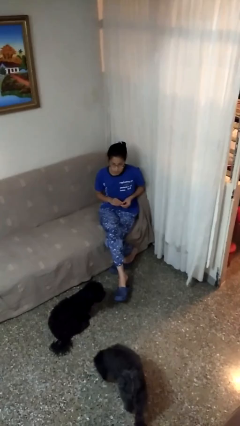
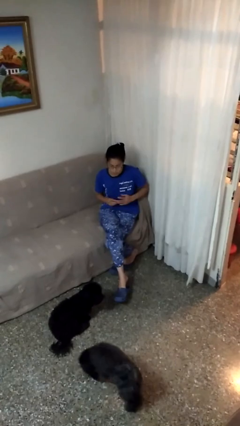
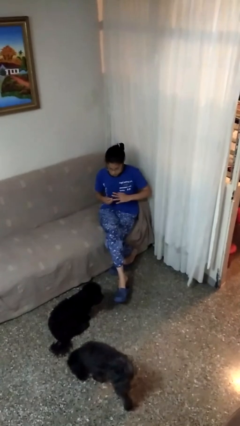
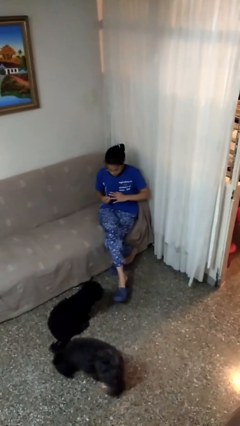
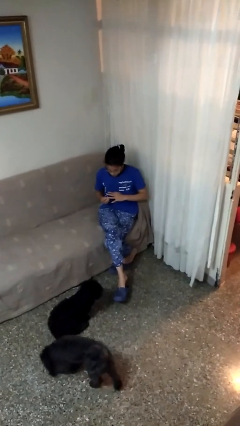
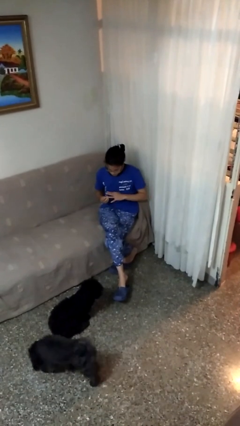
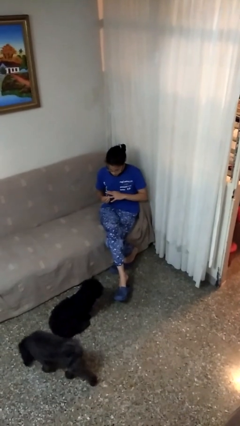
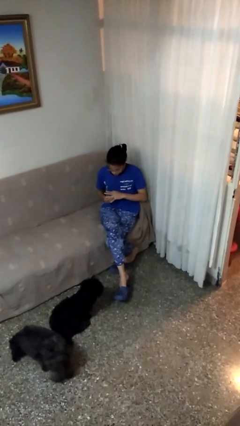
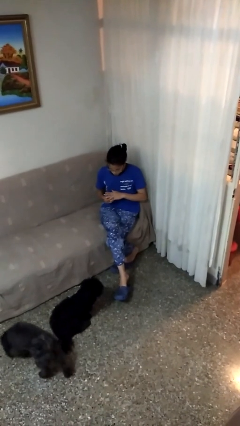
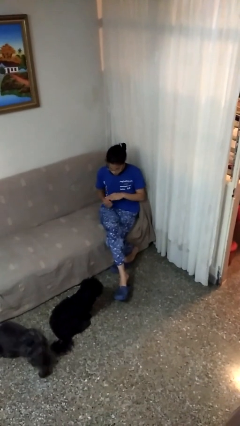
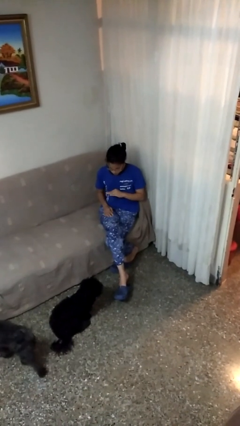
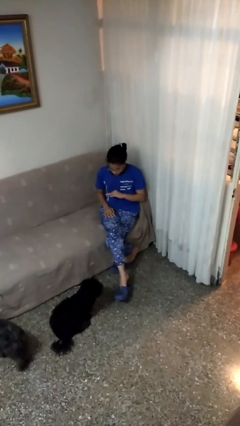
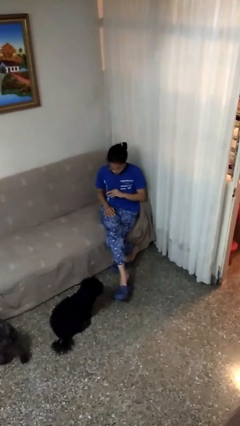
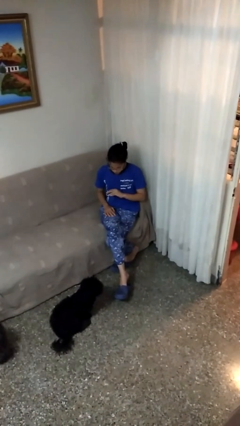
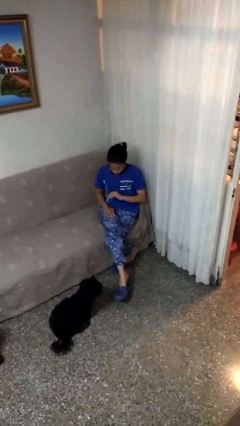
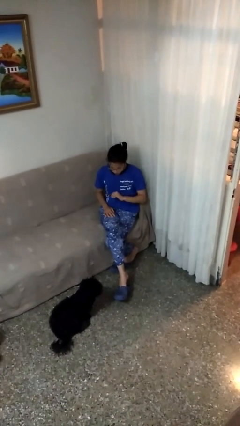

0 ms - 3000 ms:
person puts on ring

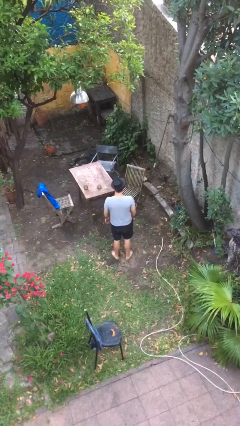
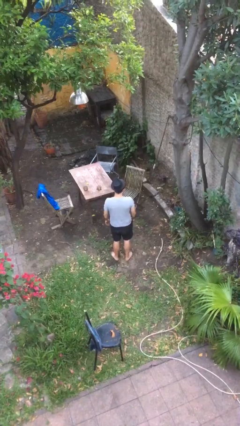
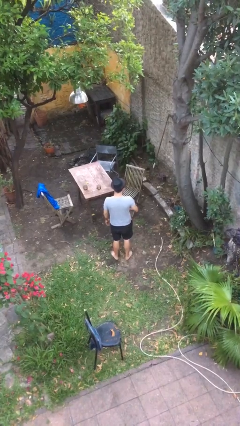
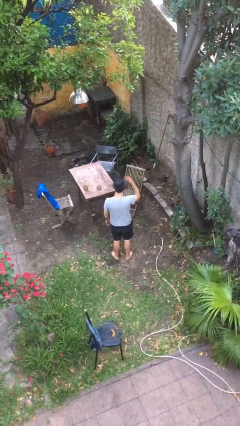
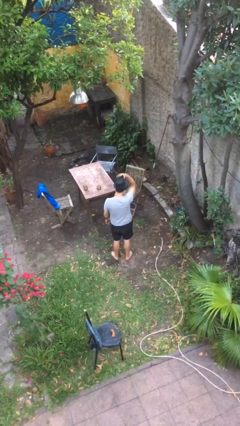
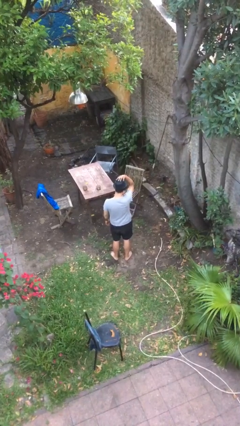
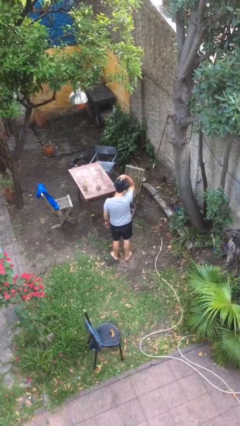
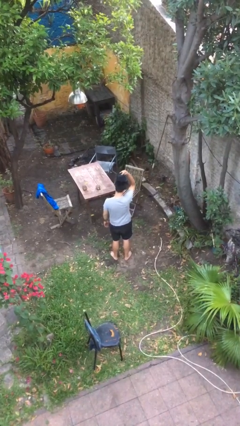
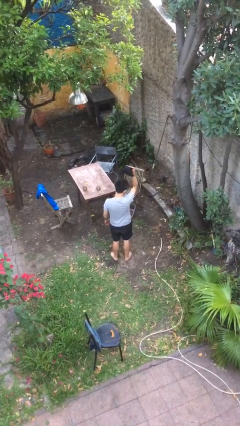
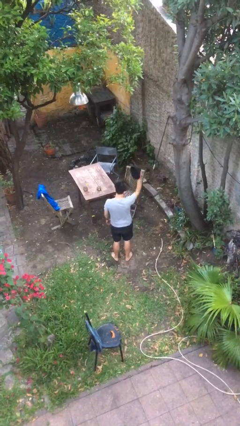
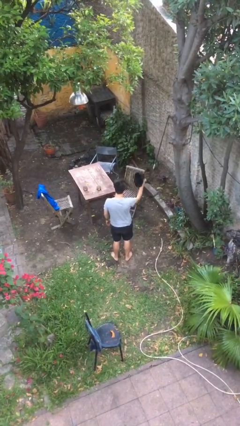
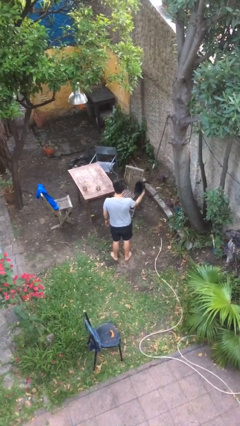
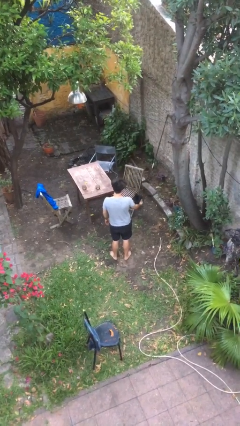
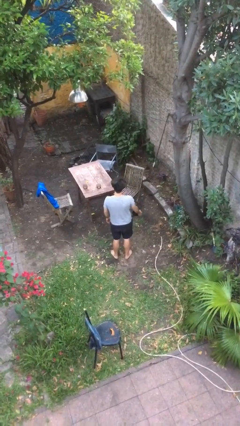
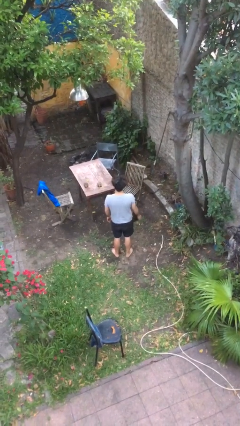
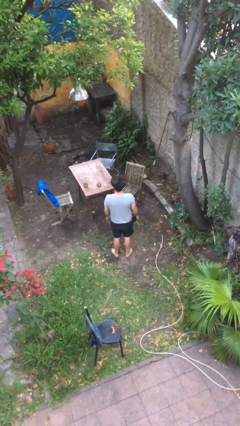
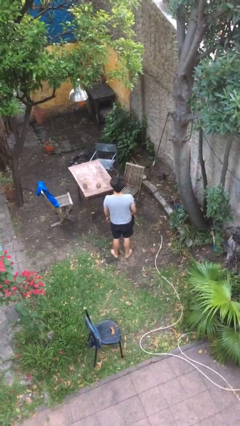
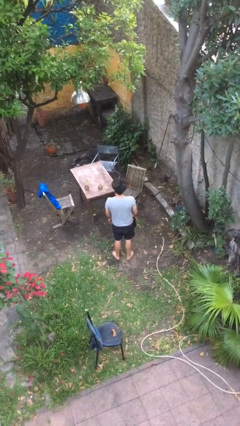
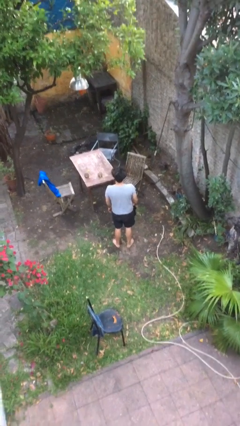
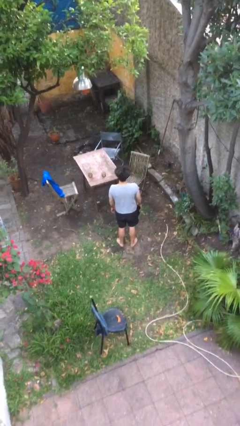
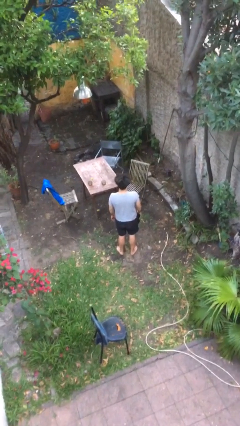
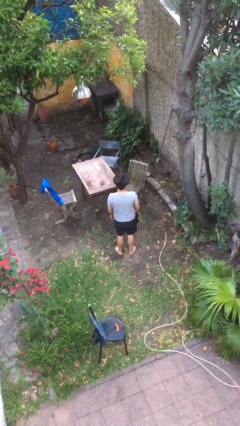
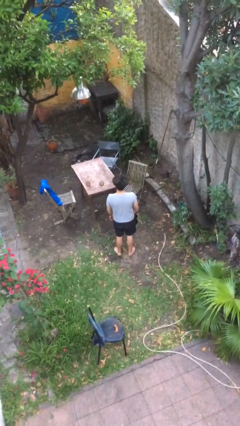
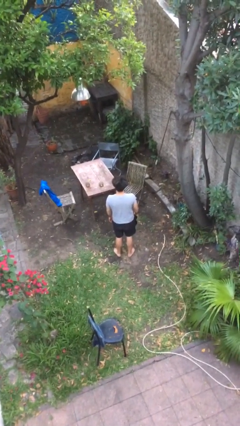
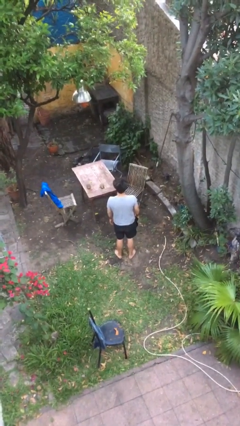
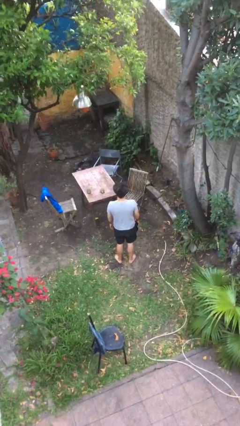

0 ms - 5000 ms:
person takes off hat

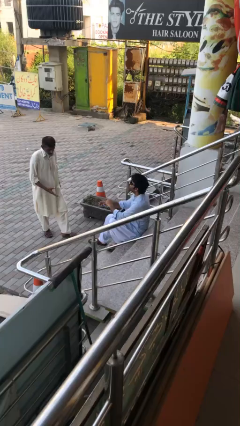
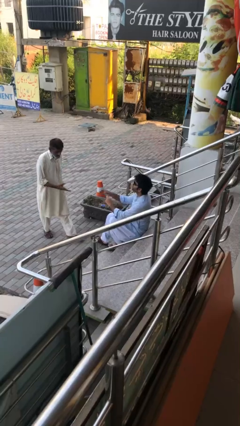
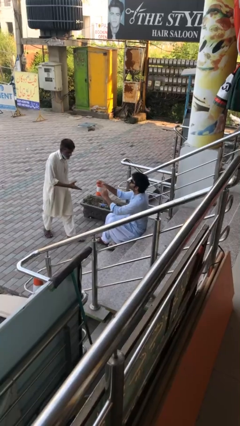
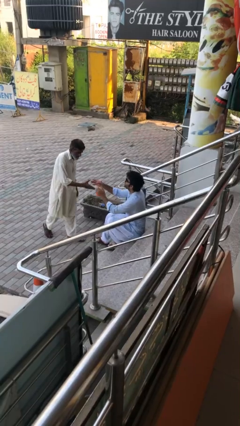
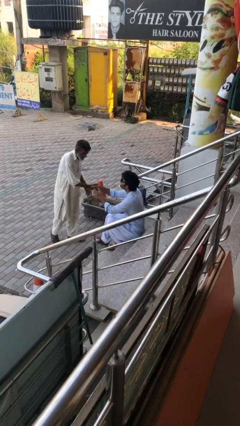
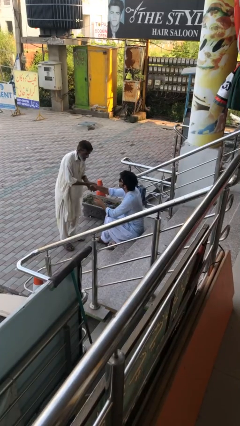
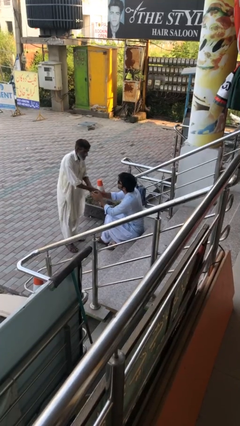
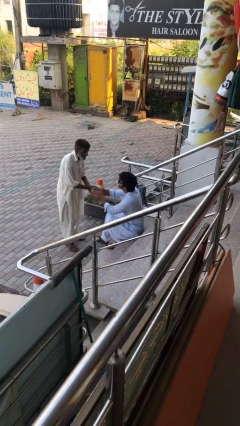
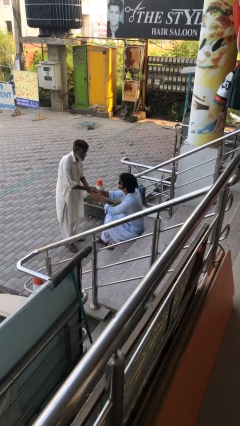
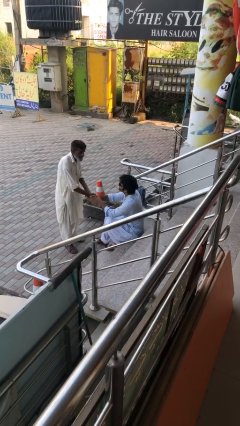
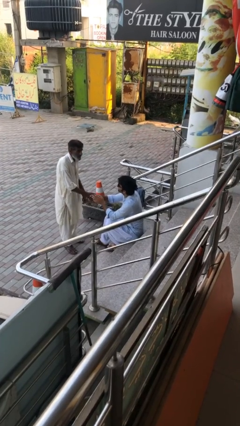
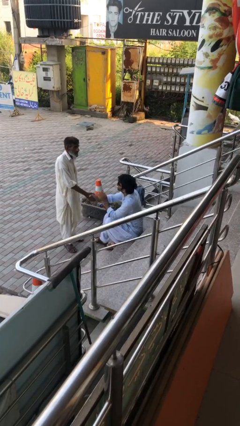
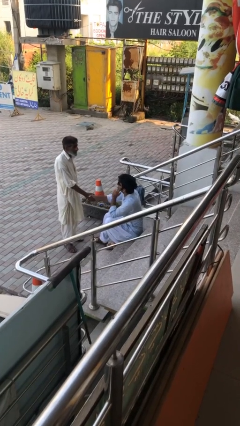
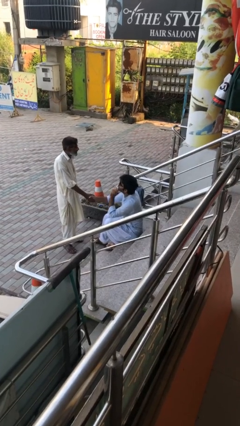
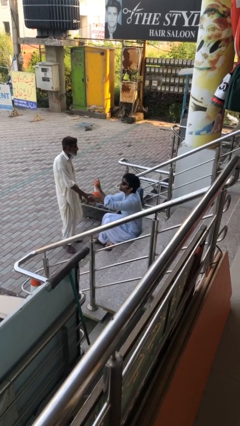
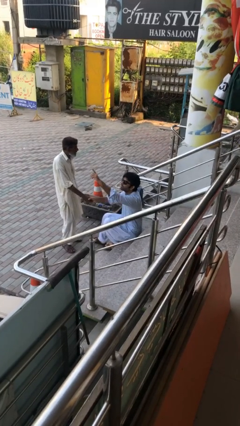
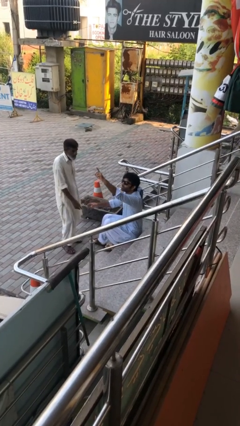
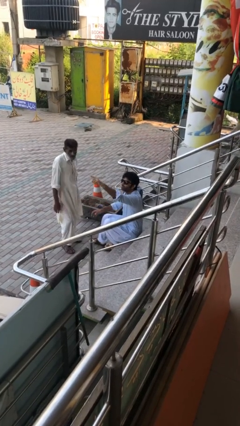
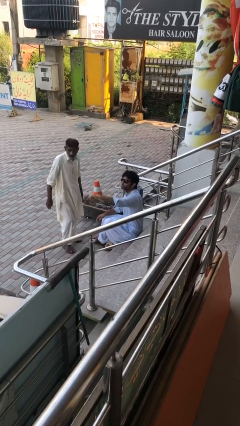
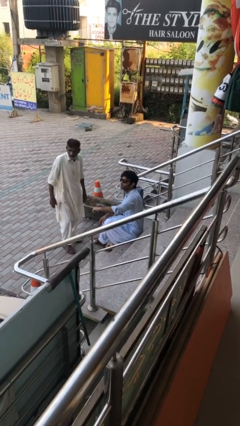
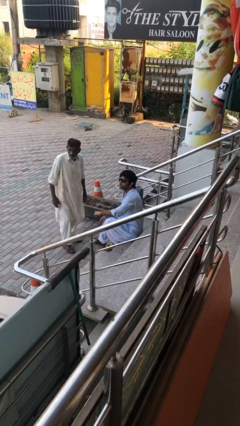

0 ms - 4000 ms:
person shakes hand

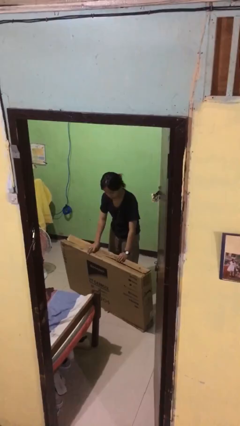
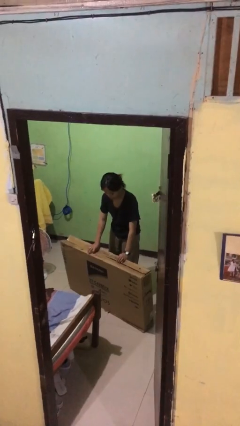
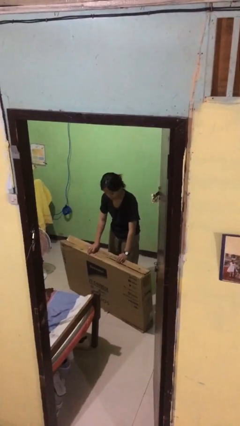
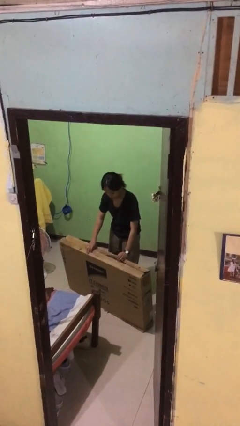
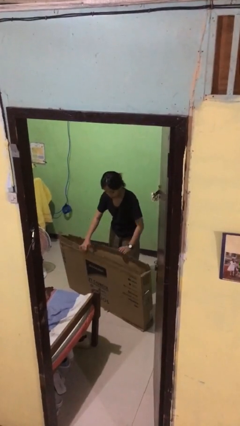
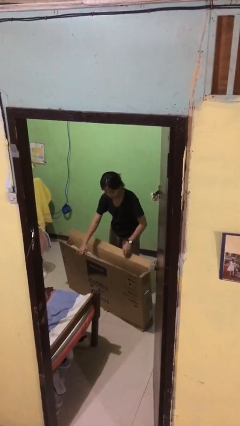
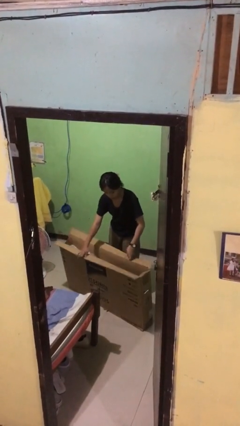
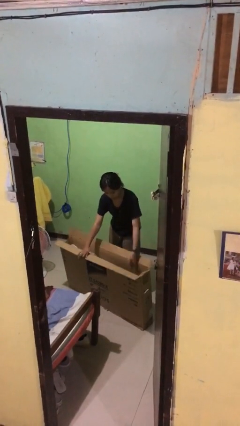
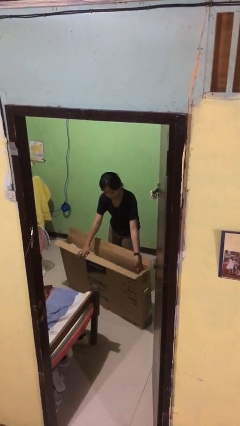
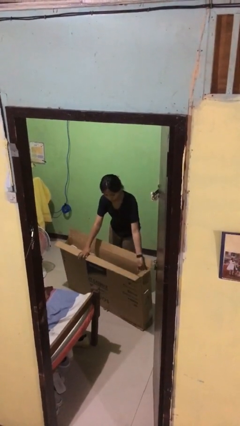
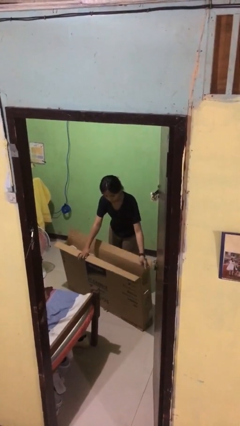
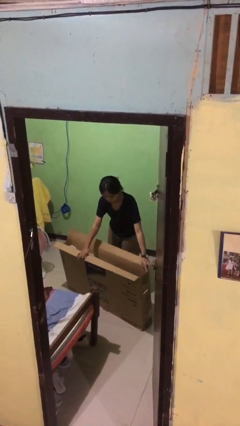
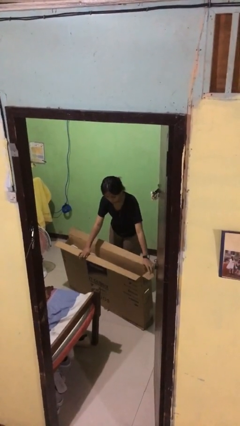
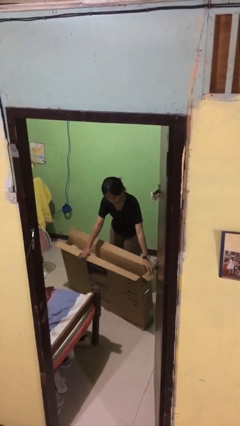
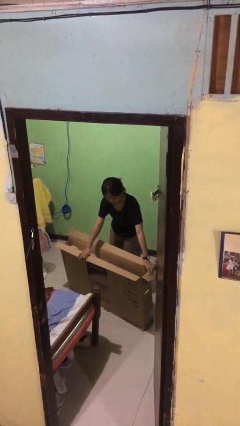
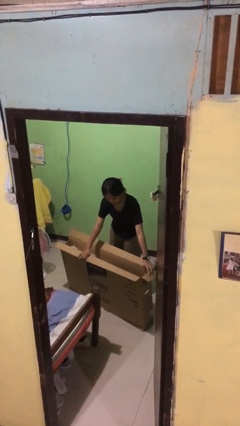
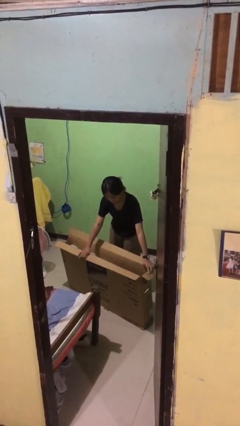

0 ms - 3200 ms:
person opens box

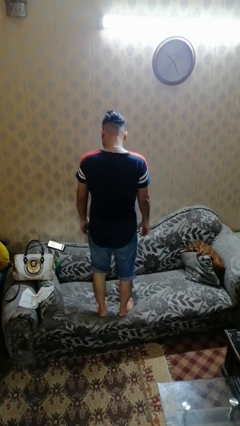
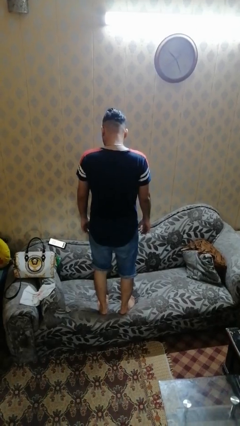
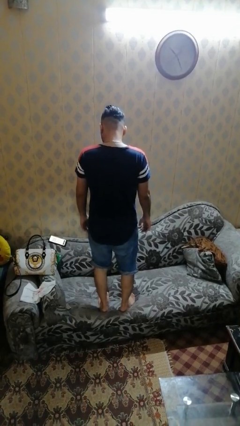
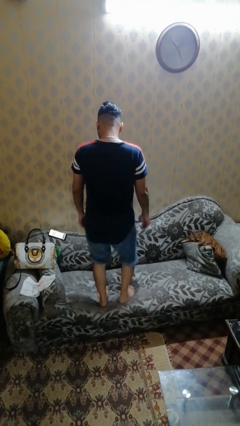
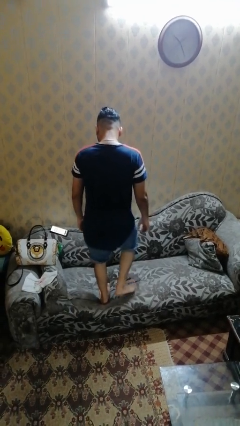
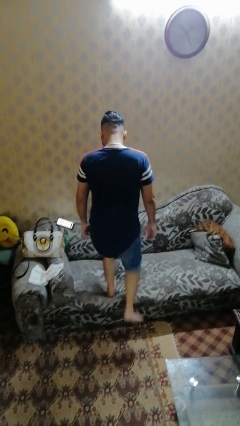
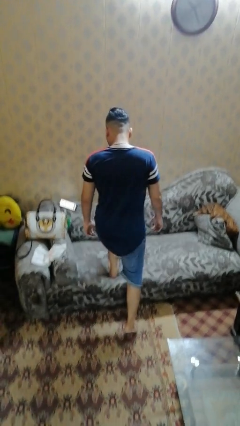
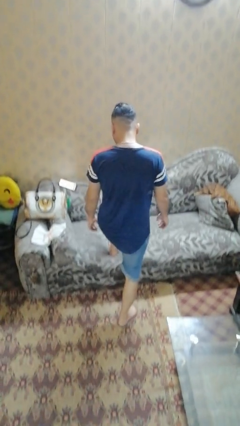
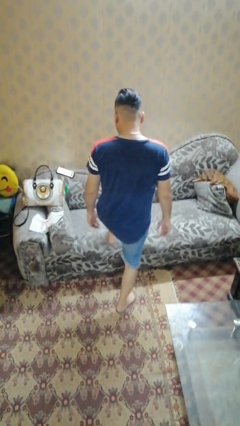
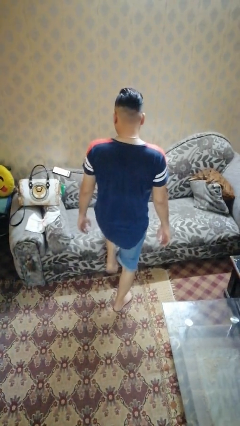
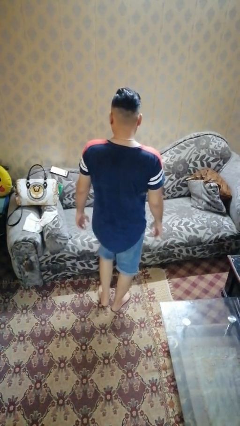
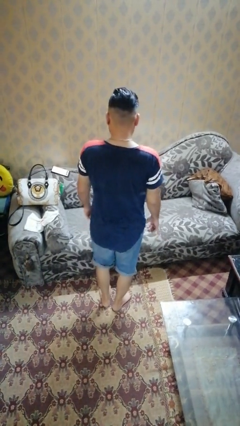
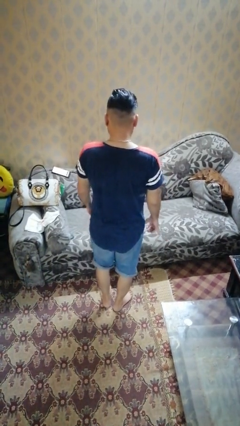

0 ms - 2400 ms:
person climbs off couch
